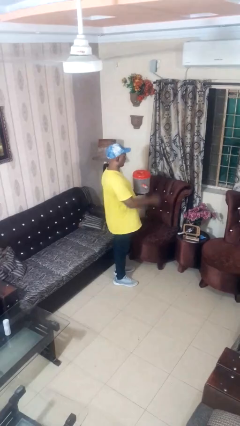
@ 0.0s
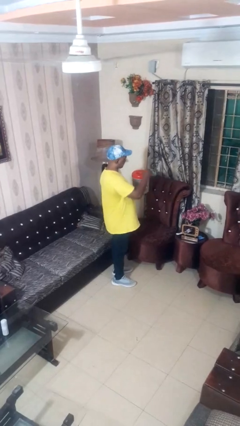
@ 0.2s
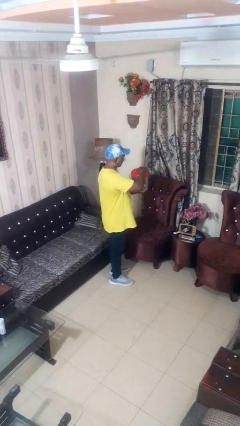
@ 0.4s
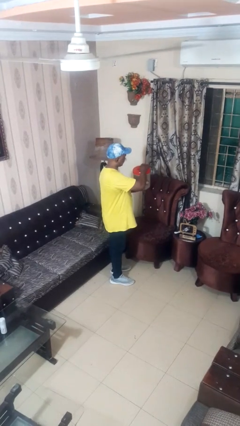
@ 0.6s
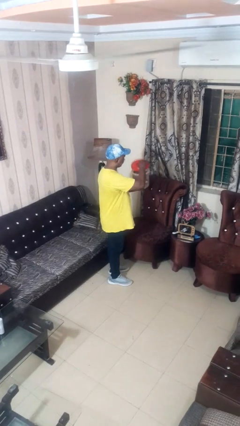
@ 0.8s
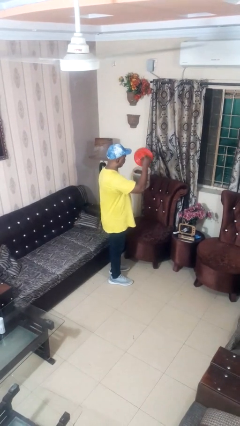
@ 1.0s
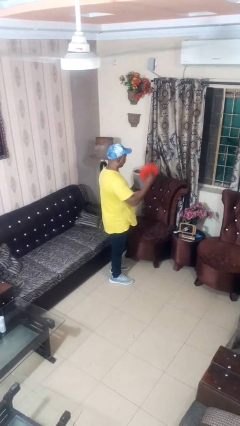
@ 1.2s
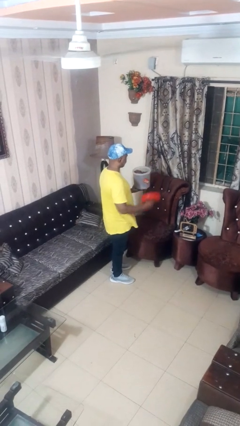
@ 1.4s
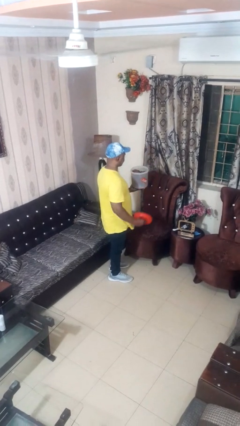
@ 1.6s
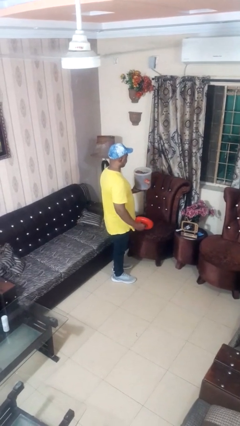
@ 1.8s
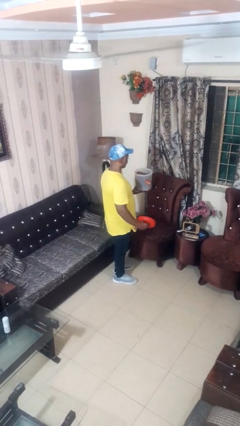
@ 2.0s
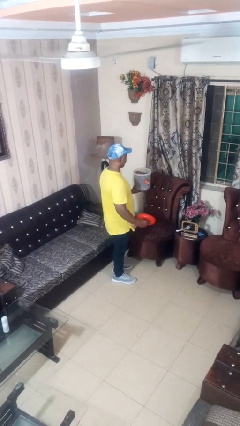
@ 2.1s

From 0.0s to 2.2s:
person opens jar

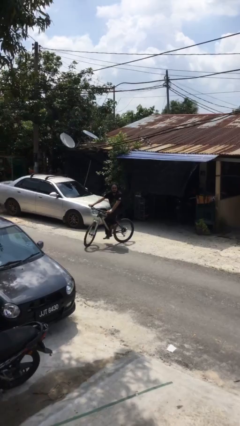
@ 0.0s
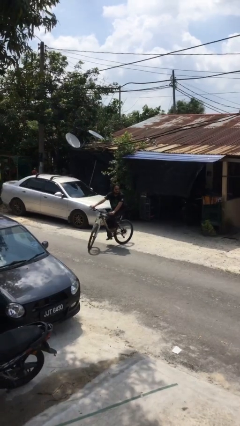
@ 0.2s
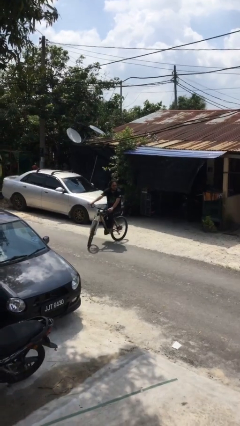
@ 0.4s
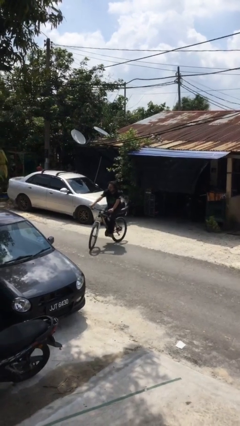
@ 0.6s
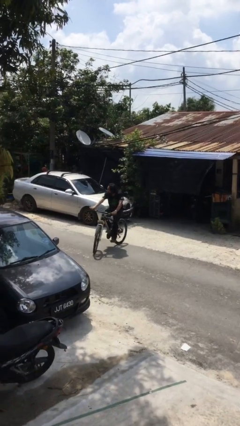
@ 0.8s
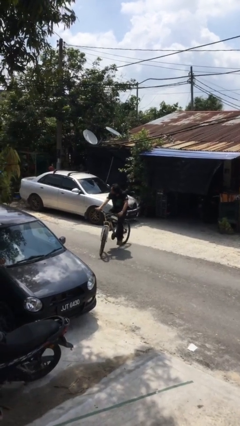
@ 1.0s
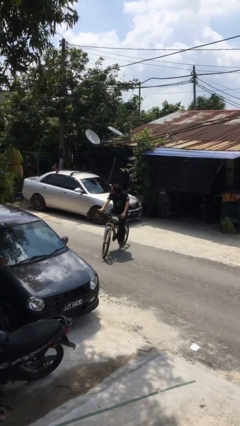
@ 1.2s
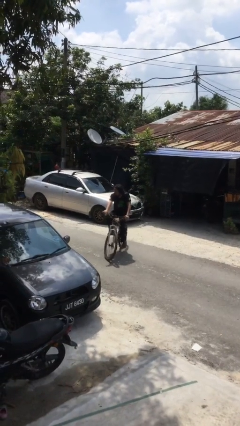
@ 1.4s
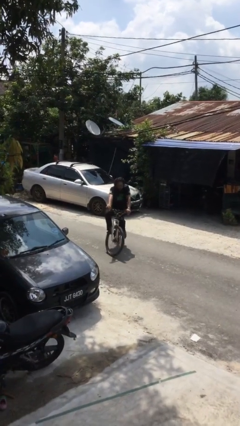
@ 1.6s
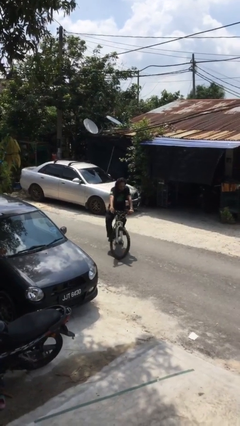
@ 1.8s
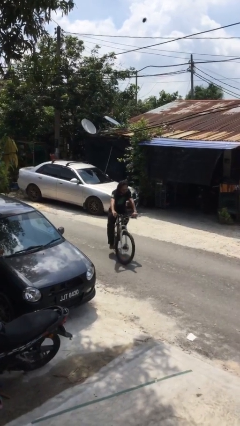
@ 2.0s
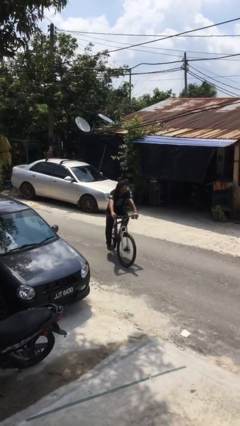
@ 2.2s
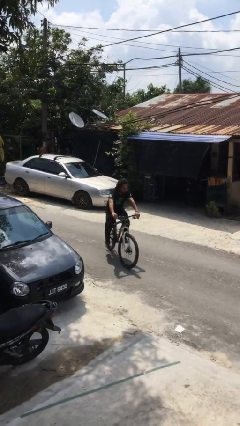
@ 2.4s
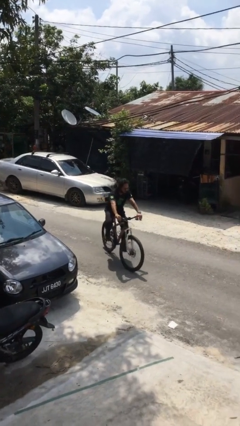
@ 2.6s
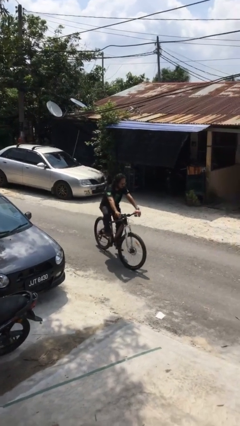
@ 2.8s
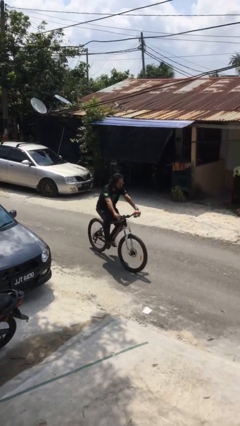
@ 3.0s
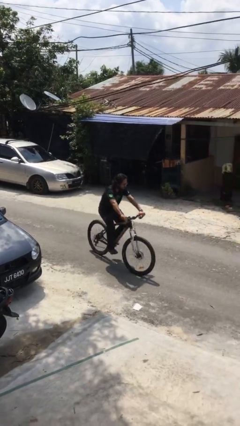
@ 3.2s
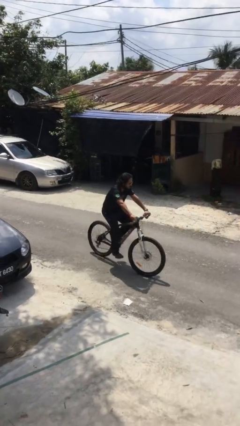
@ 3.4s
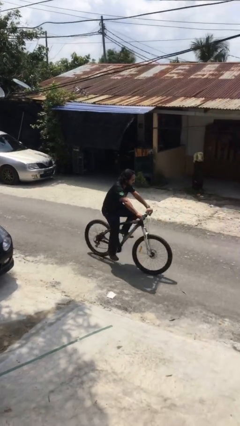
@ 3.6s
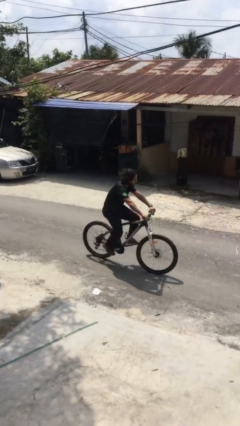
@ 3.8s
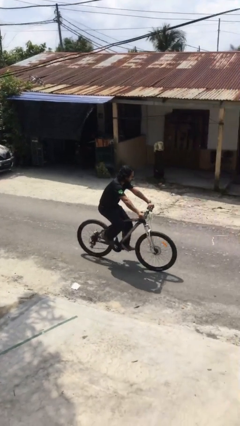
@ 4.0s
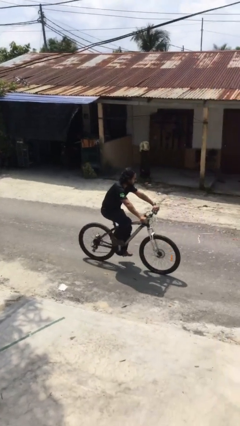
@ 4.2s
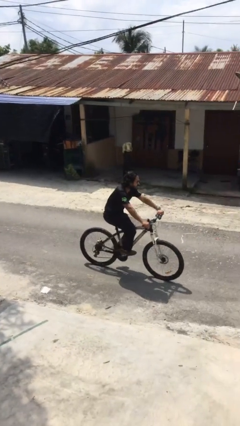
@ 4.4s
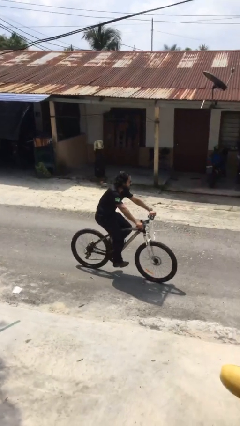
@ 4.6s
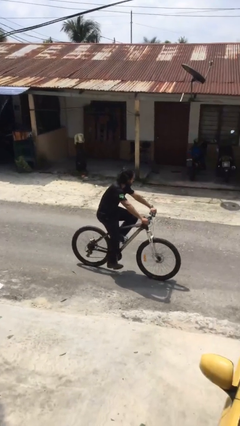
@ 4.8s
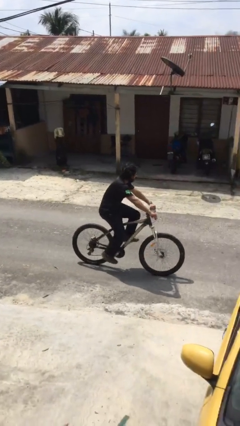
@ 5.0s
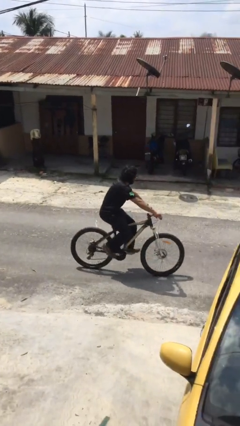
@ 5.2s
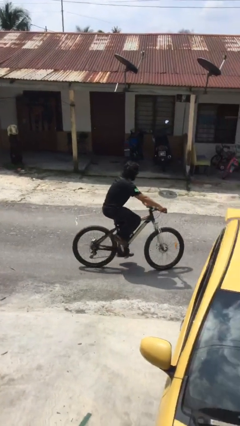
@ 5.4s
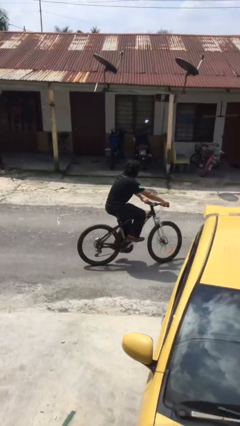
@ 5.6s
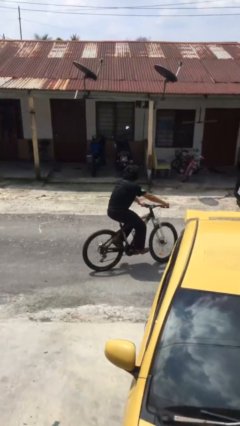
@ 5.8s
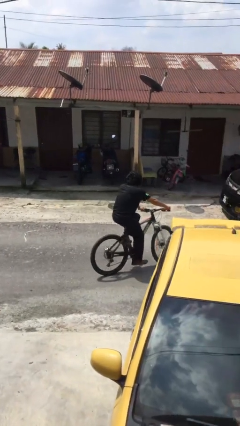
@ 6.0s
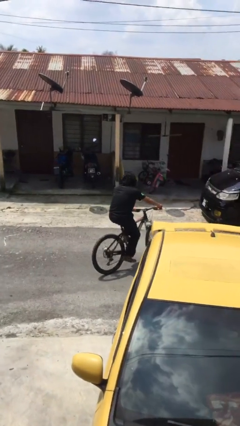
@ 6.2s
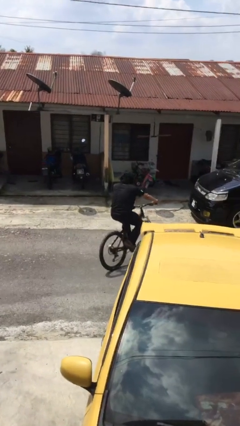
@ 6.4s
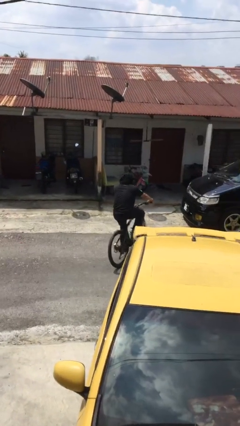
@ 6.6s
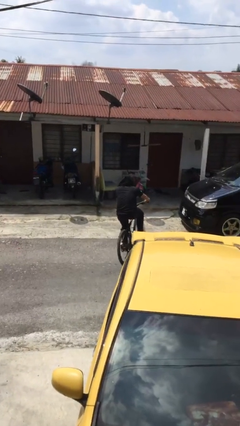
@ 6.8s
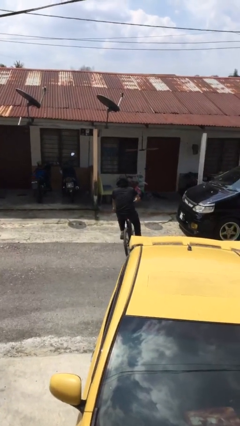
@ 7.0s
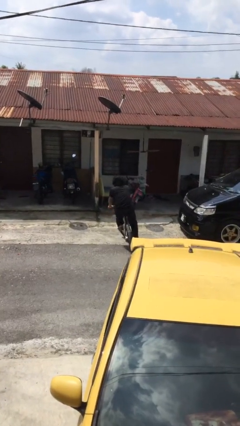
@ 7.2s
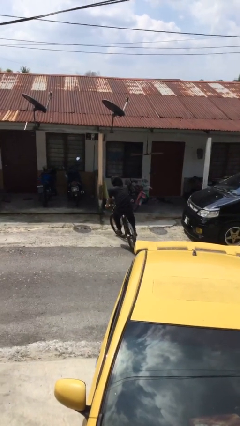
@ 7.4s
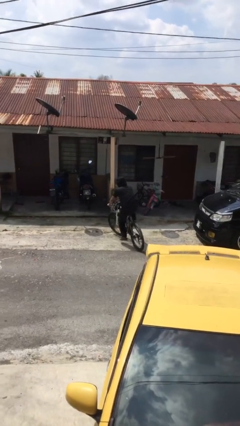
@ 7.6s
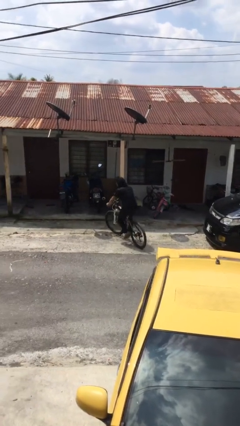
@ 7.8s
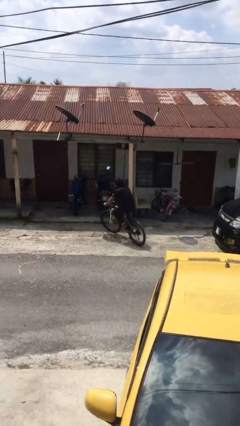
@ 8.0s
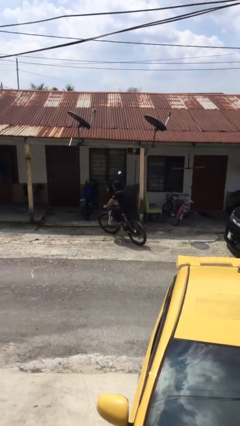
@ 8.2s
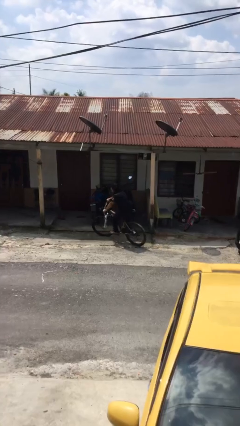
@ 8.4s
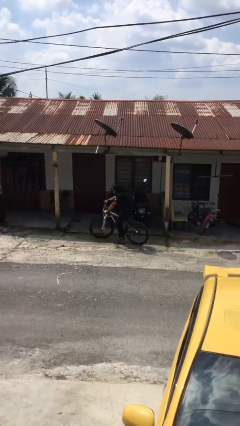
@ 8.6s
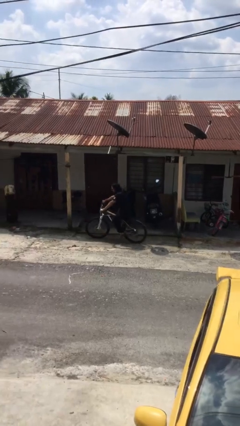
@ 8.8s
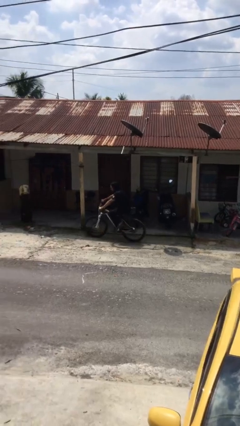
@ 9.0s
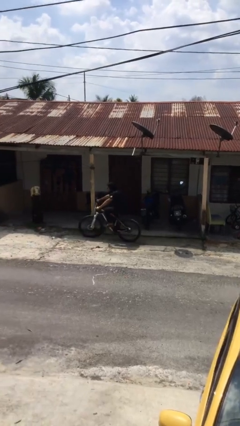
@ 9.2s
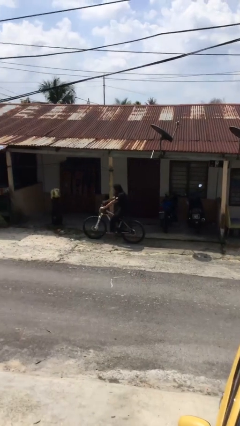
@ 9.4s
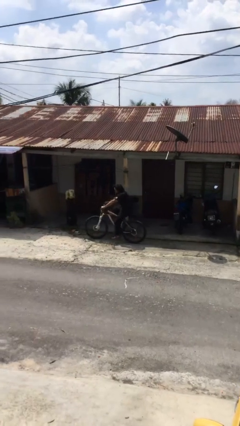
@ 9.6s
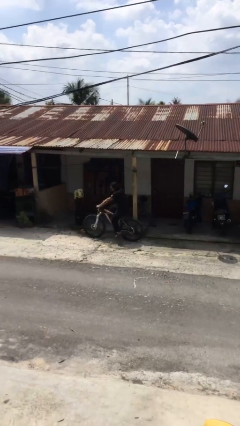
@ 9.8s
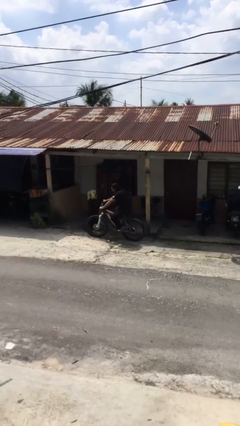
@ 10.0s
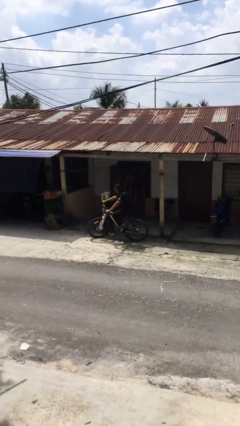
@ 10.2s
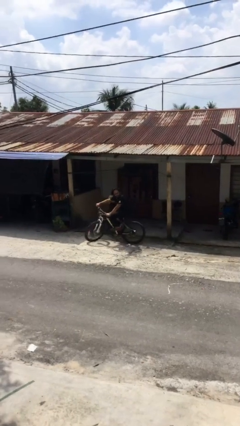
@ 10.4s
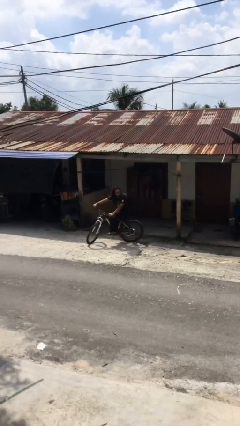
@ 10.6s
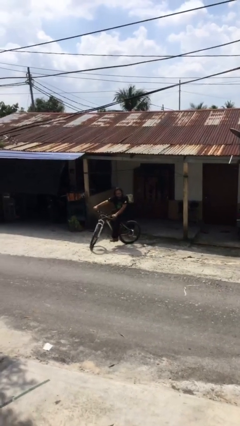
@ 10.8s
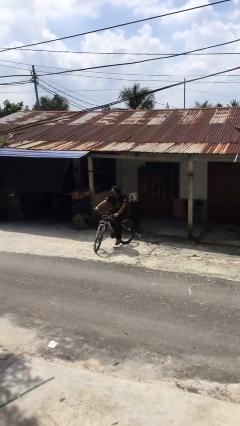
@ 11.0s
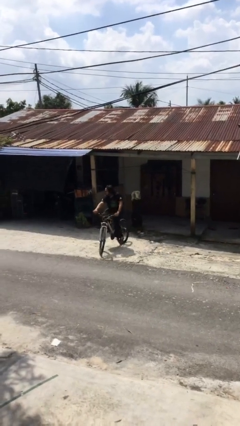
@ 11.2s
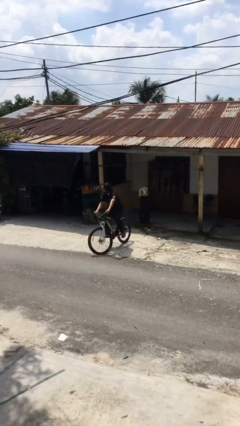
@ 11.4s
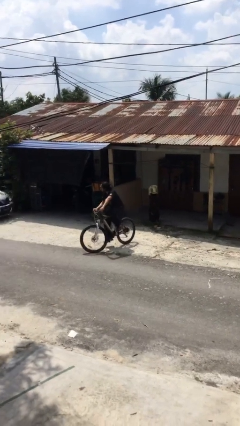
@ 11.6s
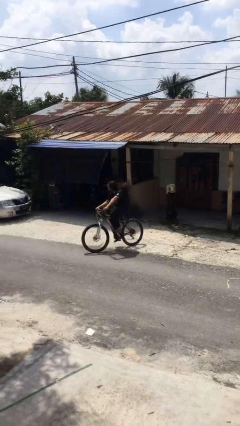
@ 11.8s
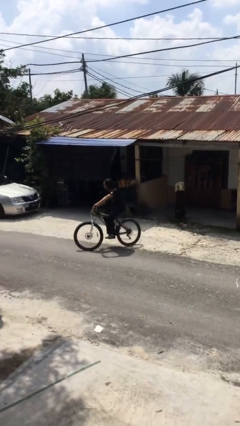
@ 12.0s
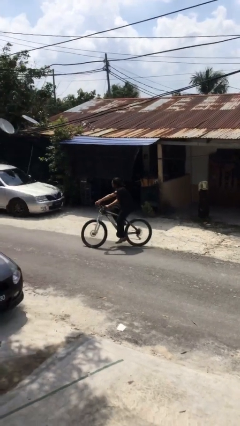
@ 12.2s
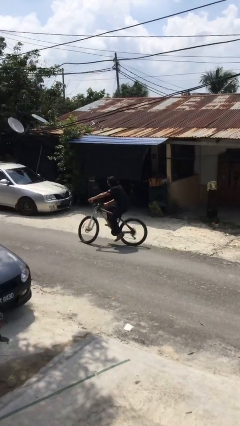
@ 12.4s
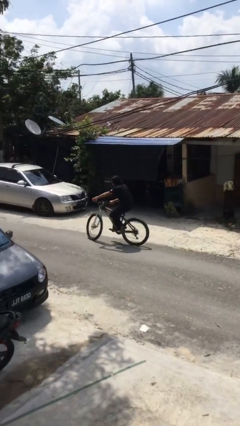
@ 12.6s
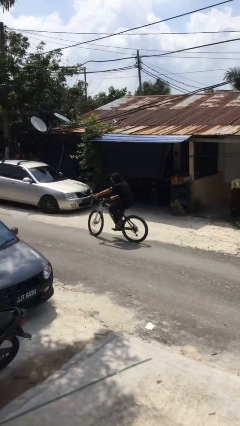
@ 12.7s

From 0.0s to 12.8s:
person rides bicycle

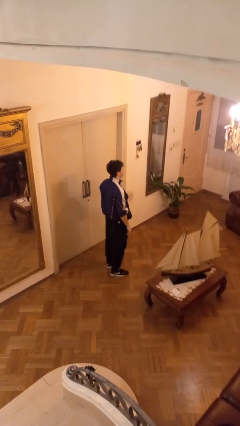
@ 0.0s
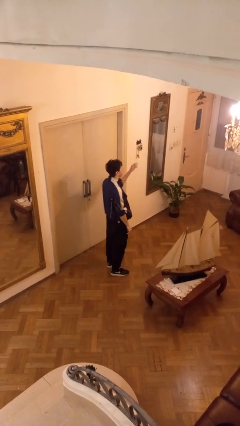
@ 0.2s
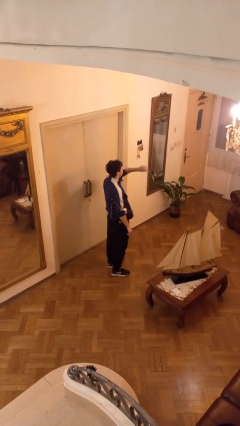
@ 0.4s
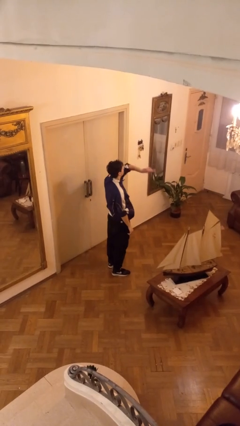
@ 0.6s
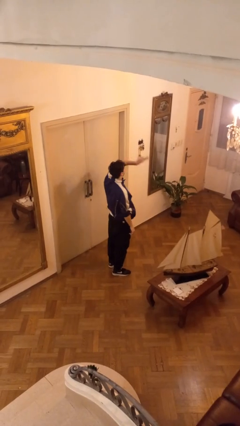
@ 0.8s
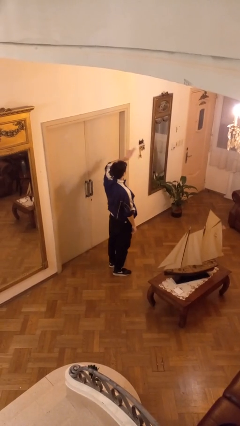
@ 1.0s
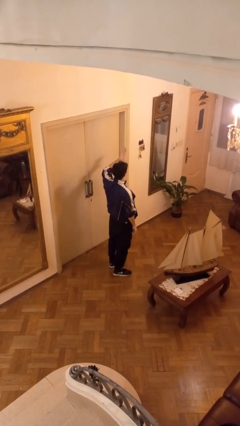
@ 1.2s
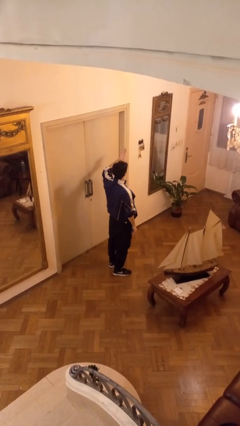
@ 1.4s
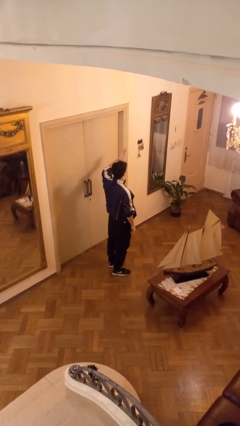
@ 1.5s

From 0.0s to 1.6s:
person gestures swipe left

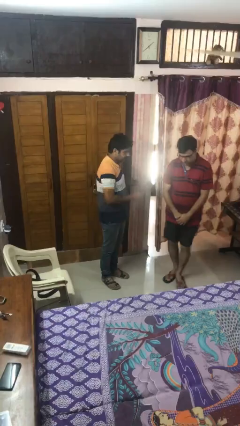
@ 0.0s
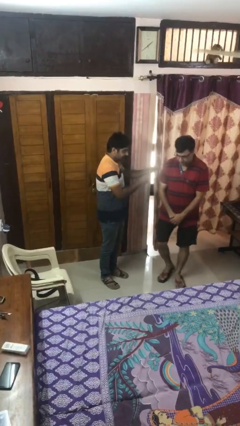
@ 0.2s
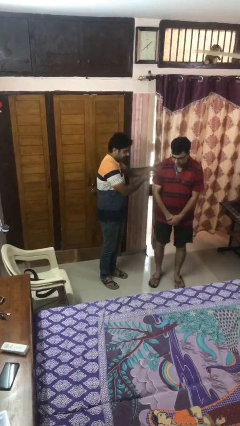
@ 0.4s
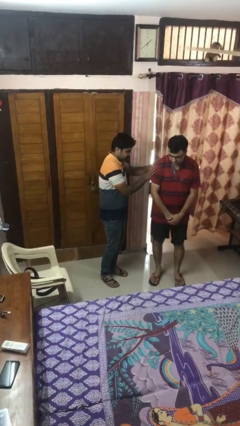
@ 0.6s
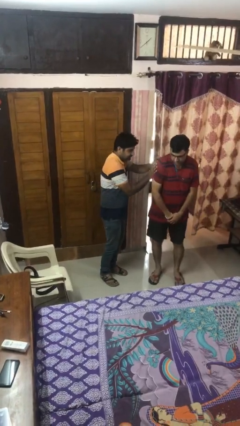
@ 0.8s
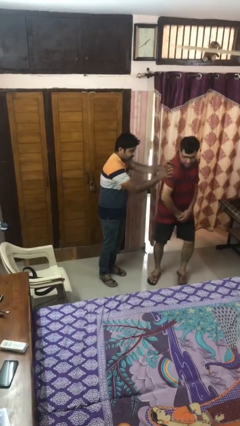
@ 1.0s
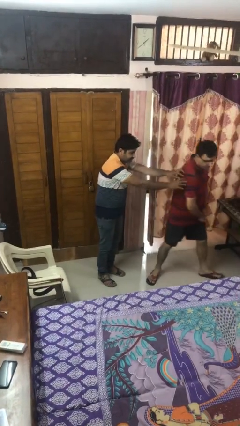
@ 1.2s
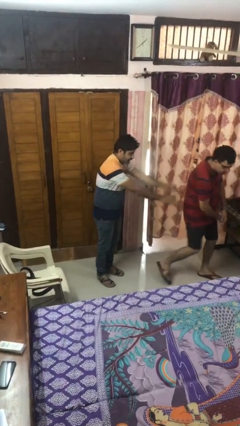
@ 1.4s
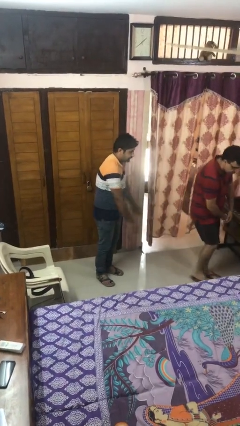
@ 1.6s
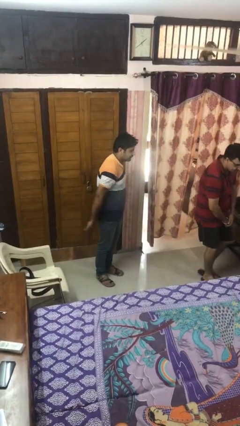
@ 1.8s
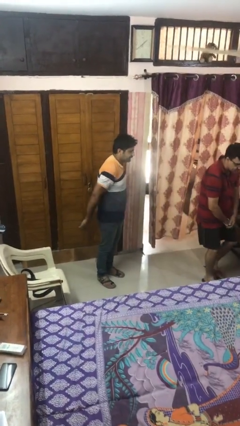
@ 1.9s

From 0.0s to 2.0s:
person shoves person
